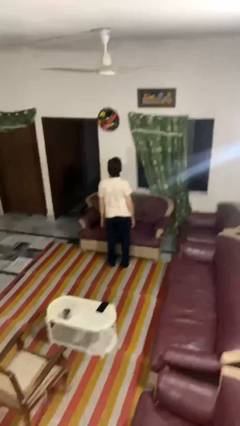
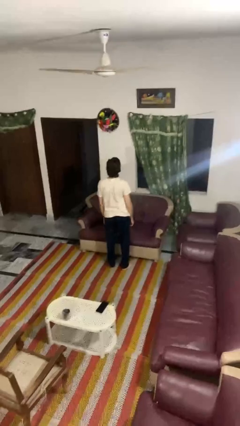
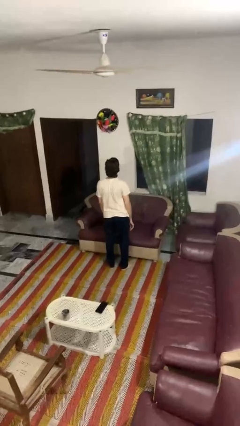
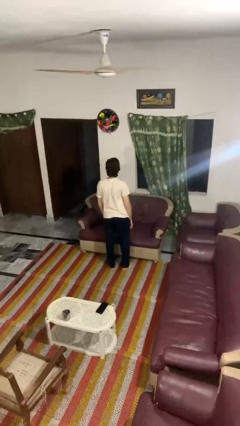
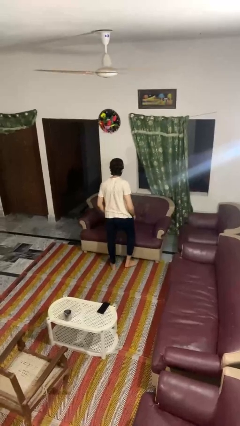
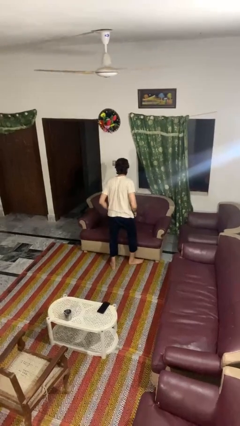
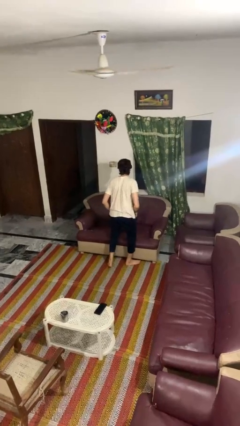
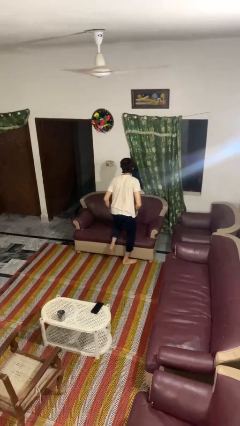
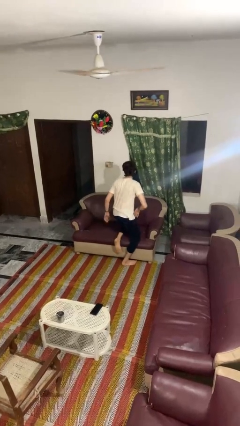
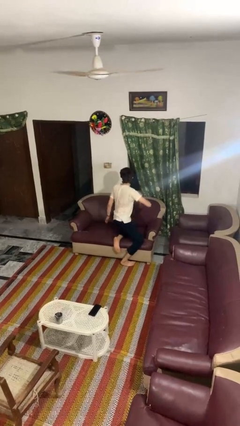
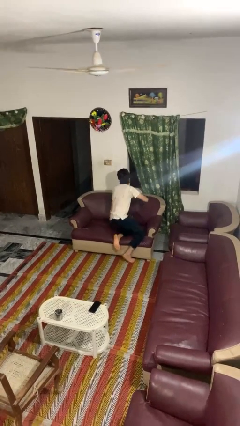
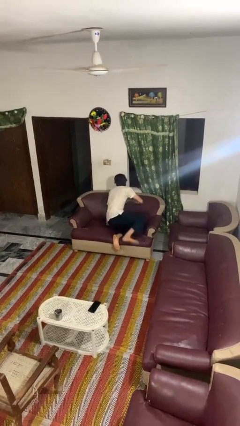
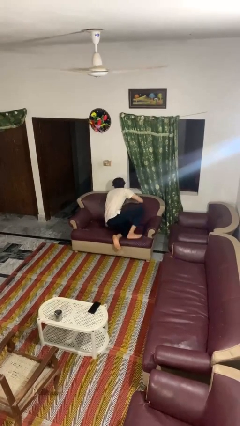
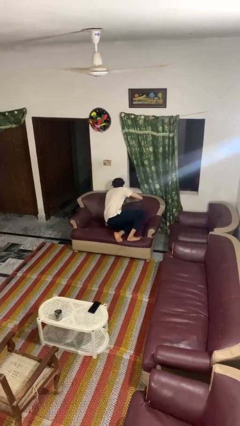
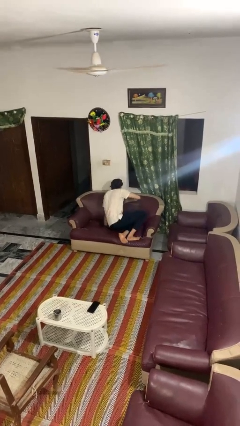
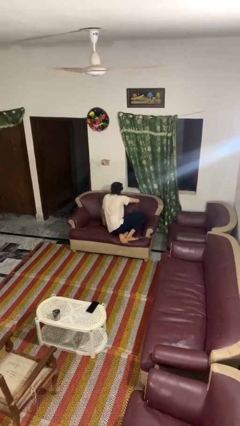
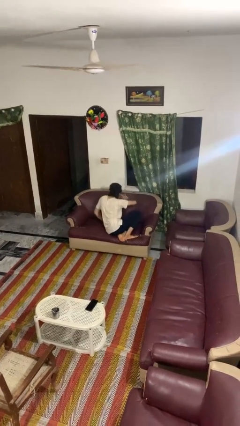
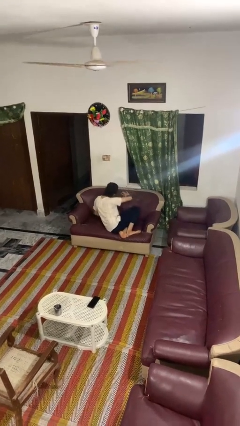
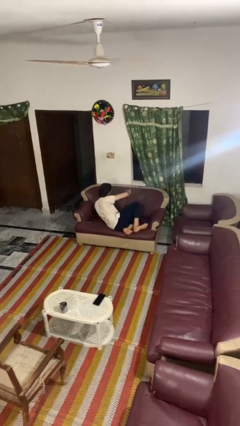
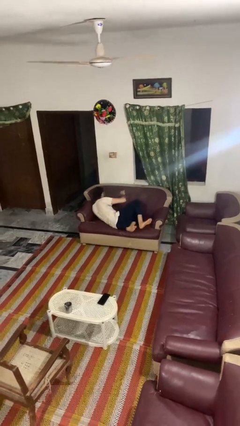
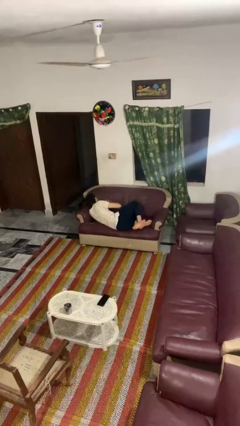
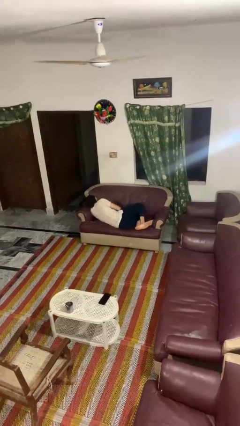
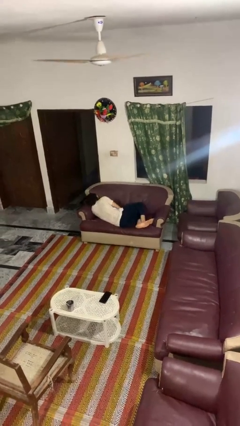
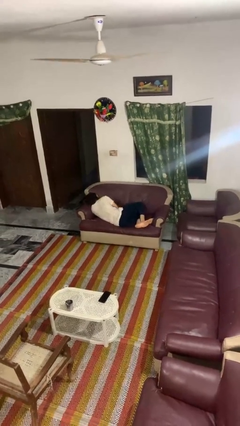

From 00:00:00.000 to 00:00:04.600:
person lies down on couch

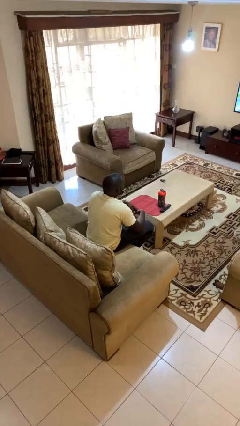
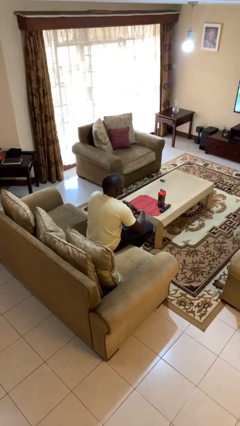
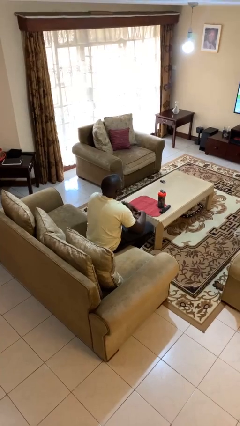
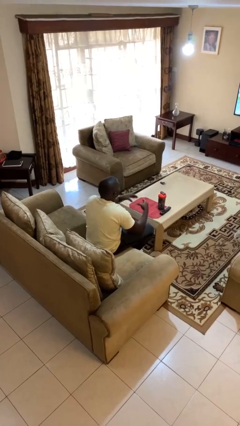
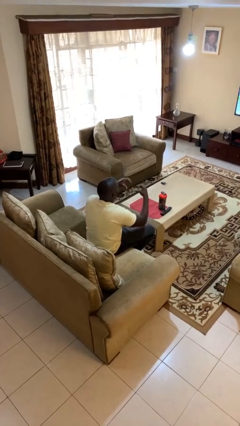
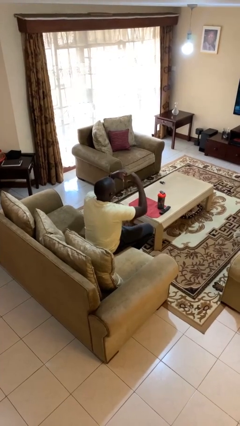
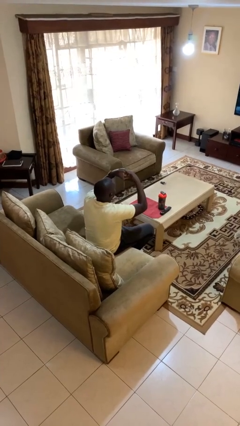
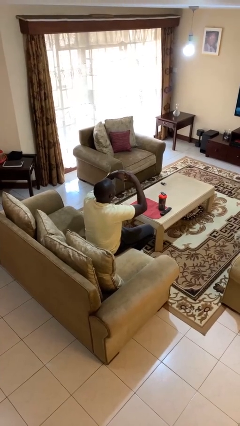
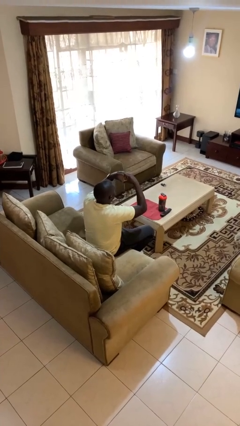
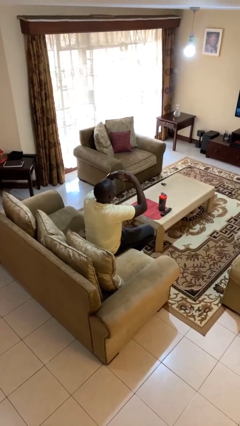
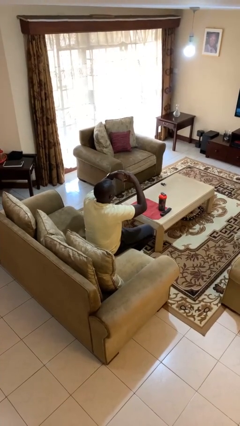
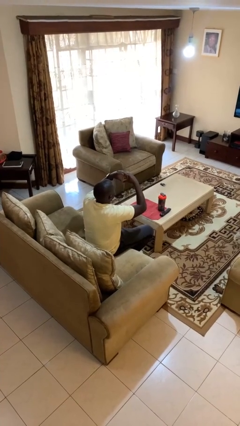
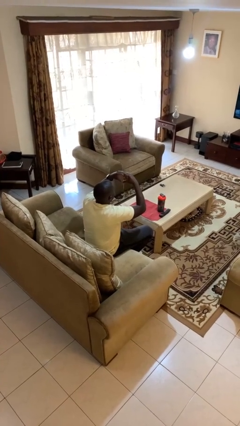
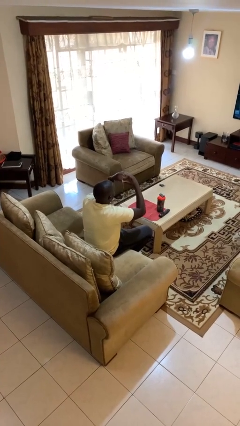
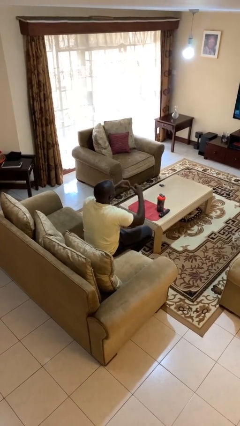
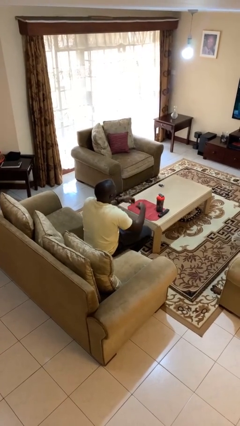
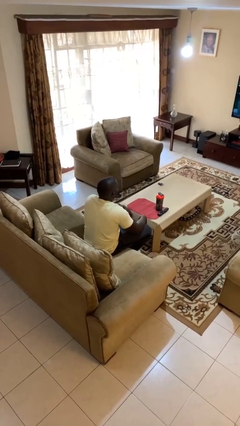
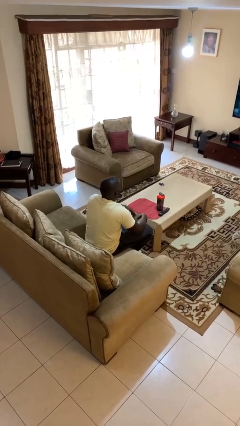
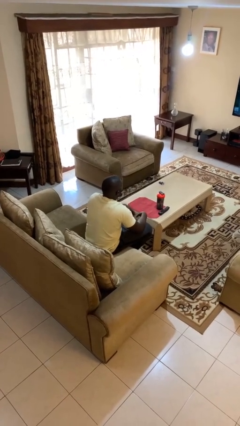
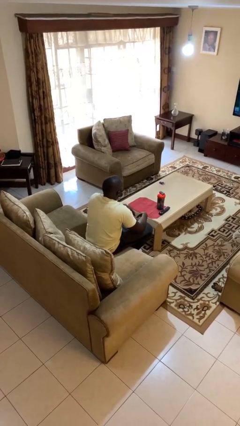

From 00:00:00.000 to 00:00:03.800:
person gestures heart

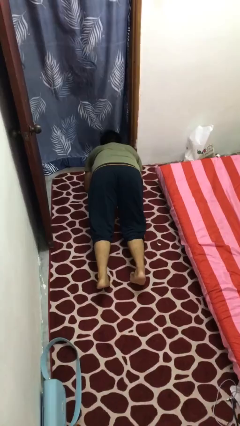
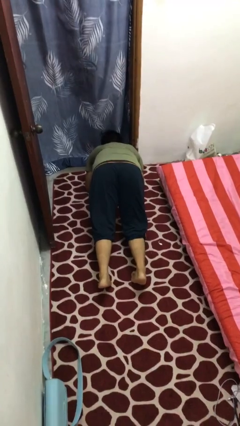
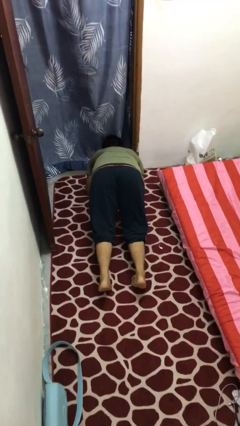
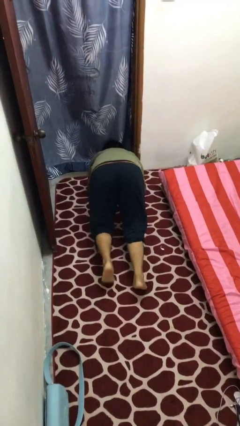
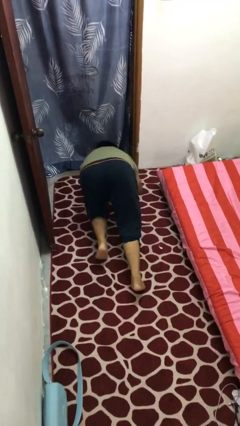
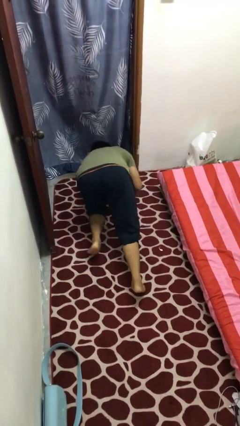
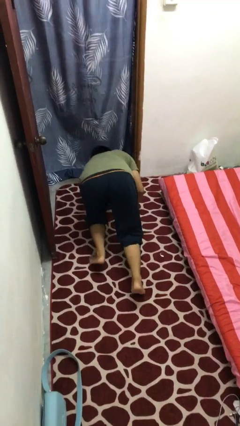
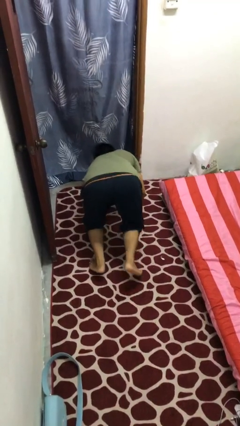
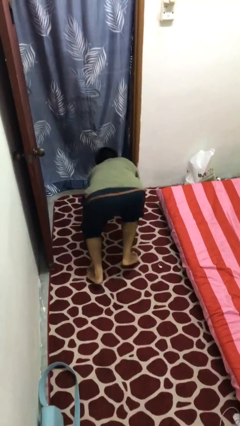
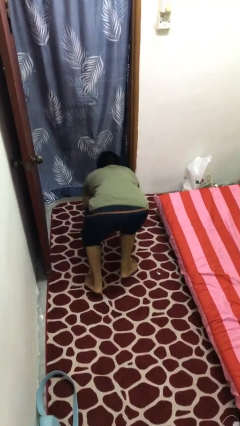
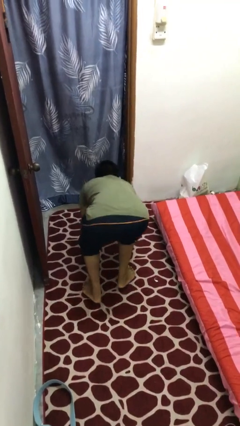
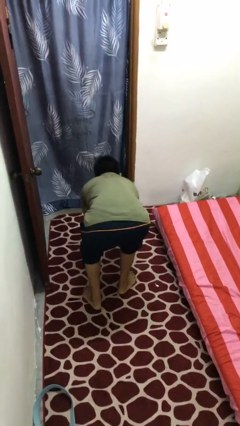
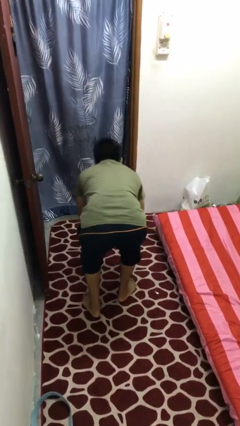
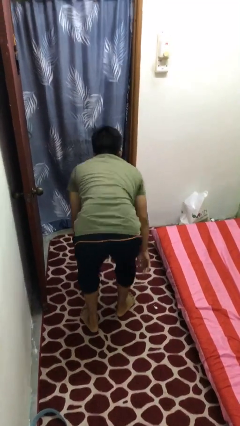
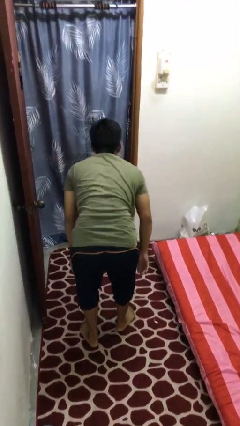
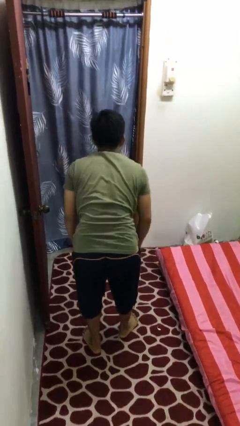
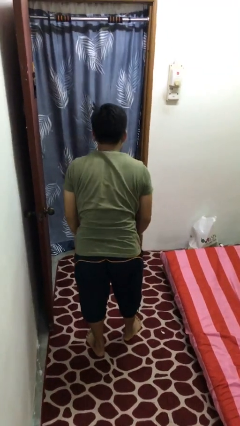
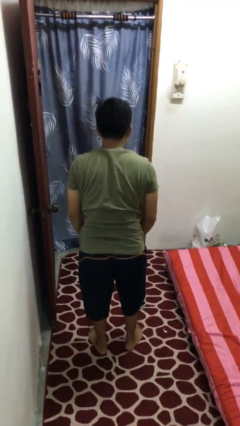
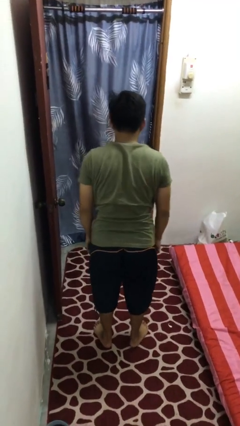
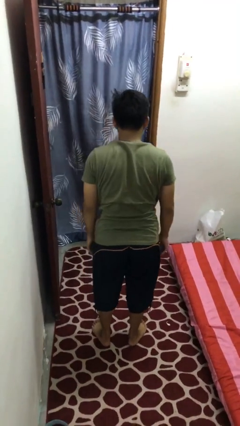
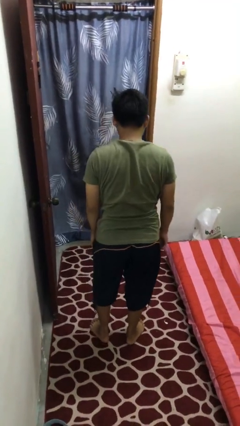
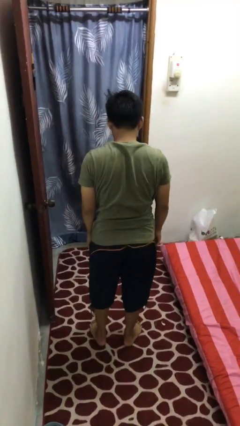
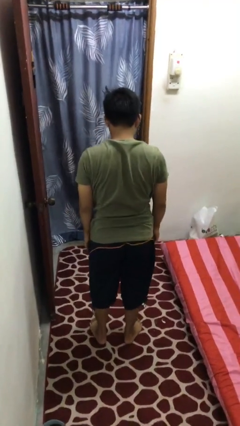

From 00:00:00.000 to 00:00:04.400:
person stands up from floor

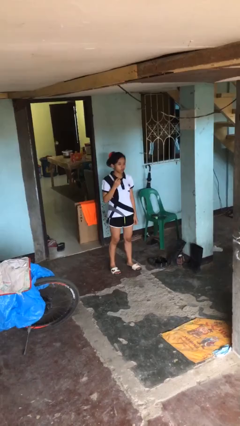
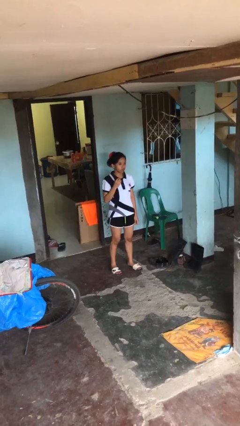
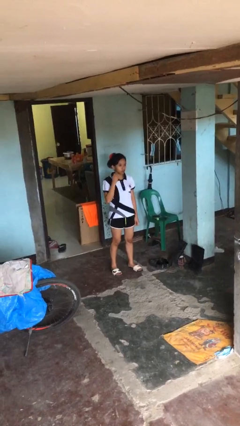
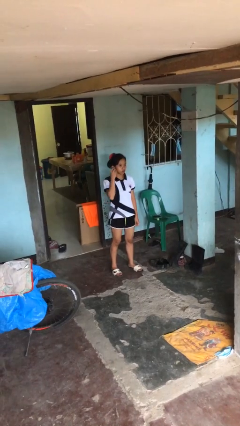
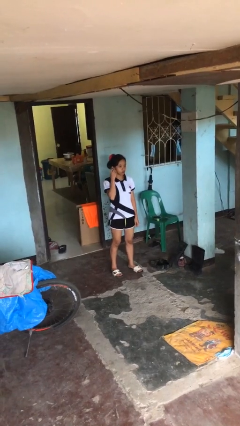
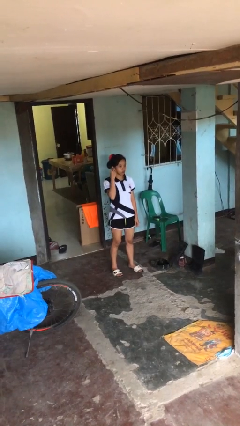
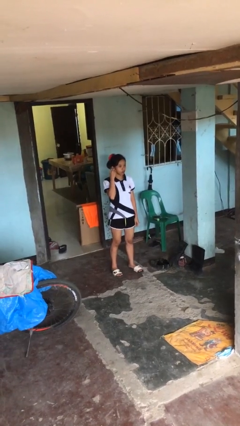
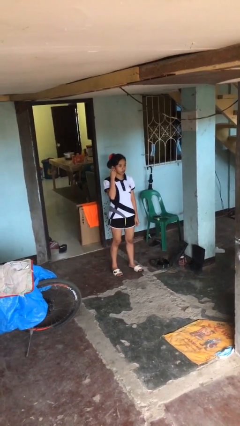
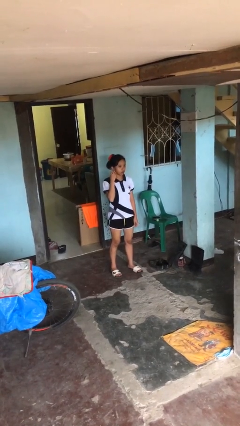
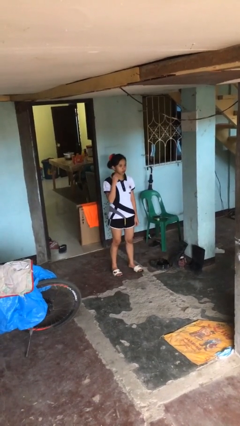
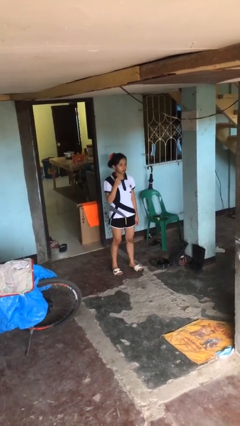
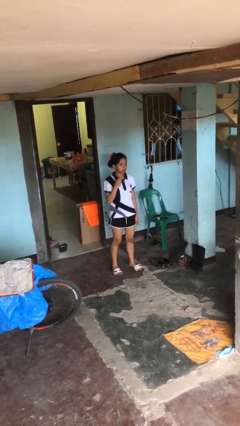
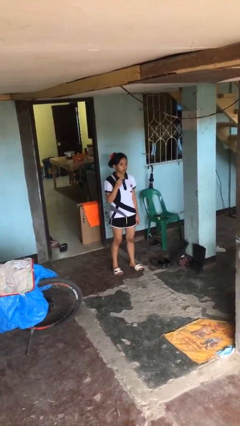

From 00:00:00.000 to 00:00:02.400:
person takes off earrings

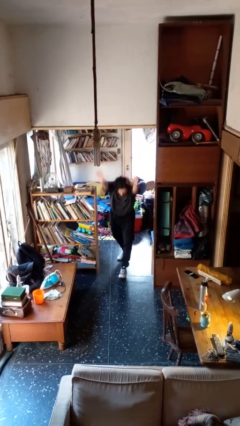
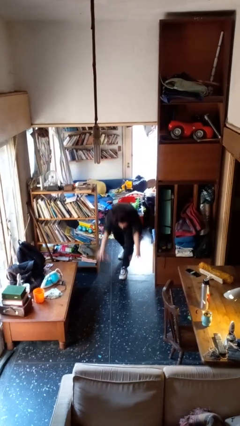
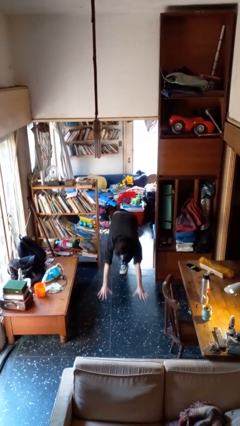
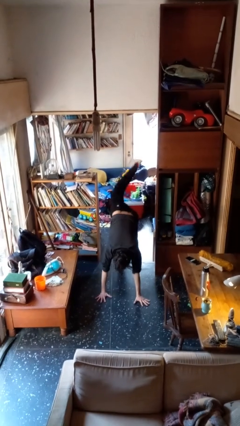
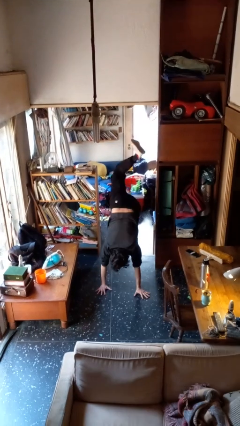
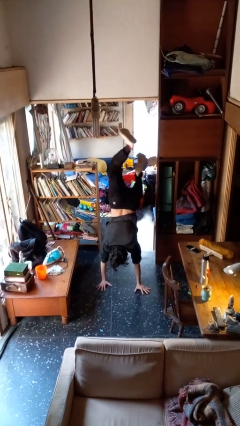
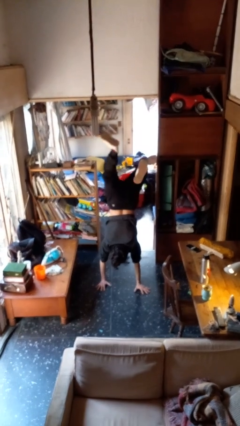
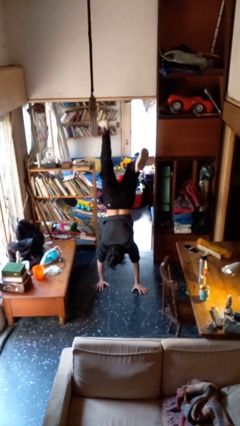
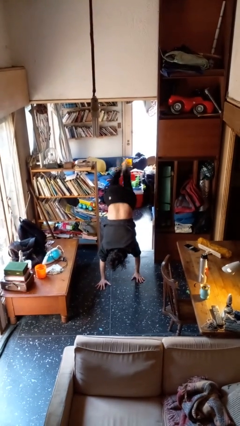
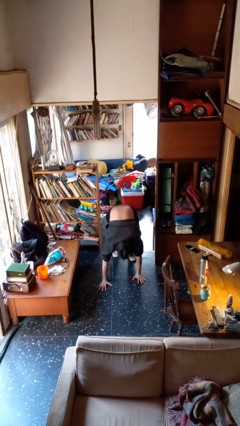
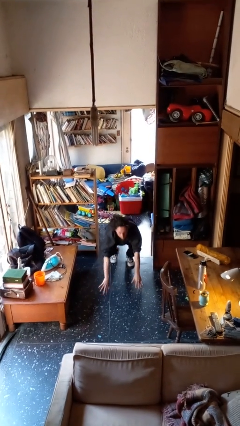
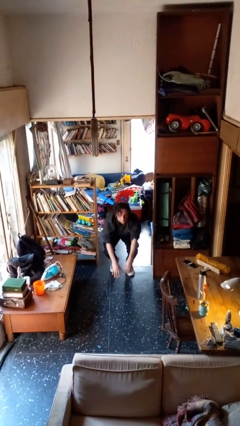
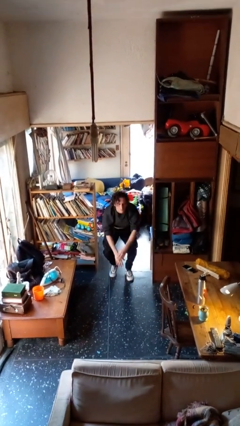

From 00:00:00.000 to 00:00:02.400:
person handstand

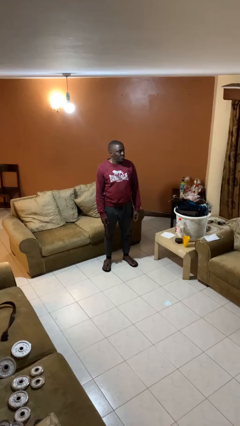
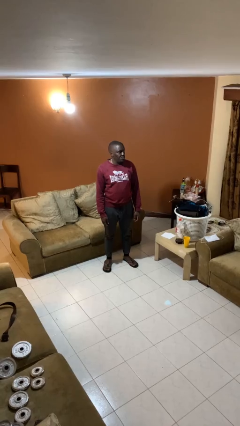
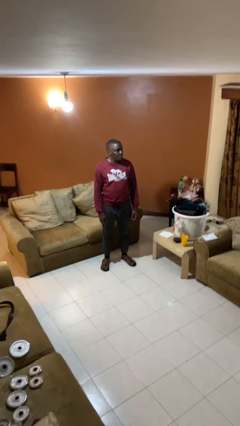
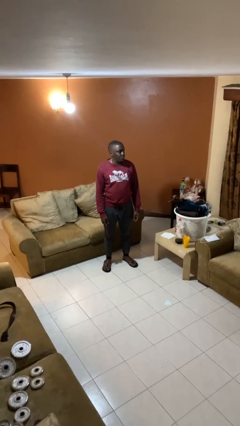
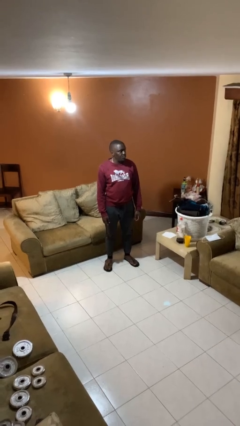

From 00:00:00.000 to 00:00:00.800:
person gestures swipe right
